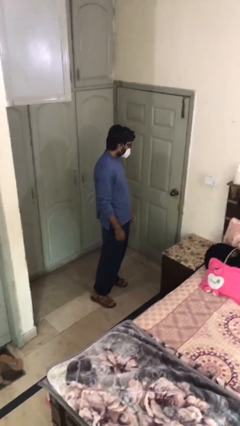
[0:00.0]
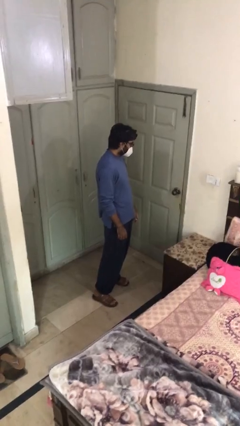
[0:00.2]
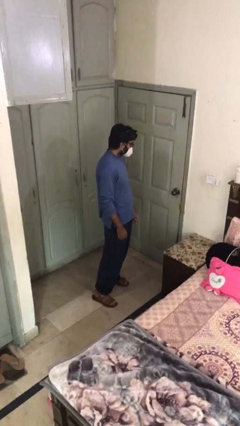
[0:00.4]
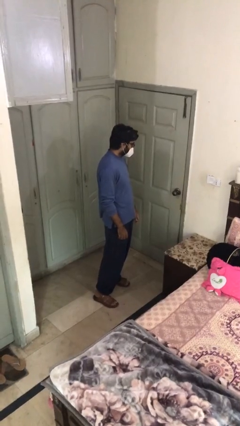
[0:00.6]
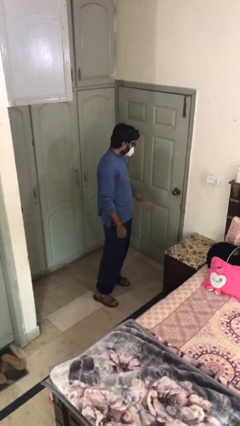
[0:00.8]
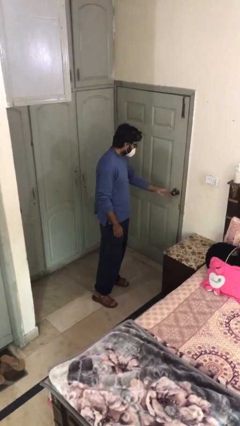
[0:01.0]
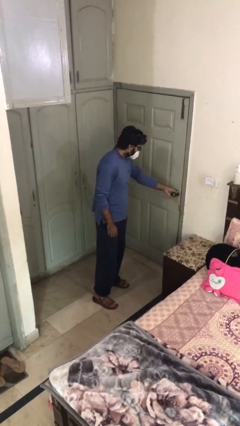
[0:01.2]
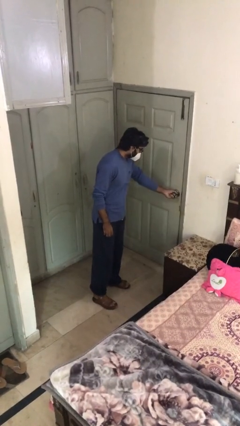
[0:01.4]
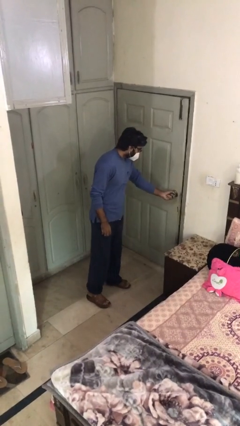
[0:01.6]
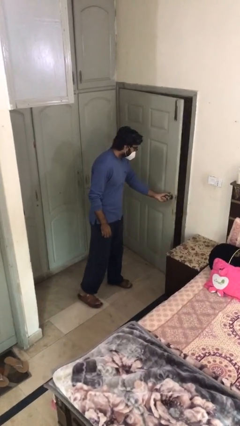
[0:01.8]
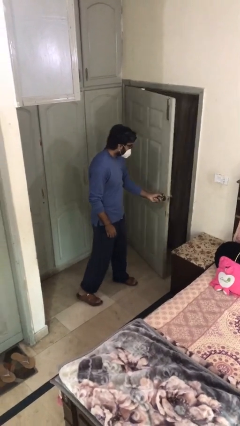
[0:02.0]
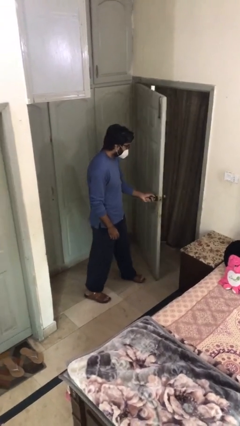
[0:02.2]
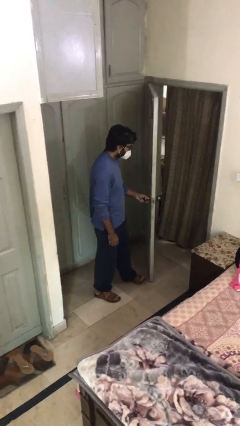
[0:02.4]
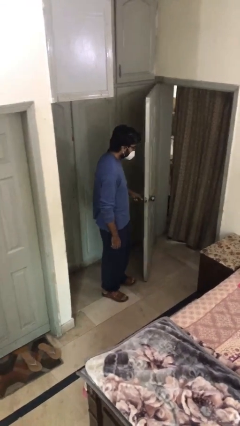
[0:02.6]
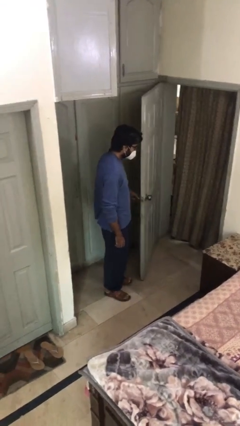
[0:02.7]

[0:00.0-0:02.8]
person opens facility door

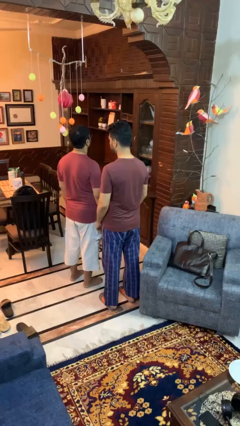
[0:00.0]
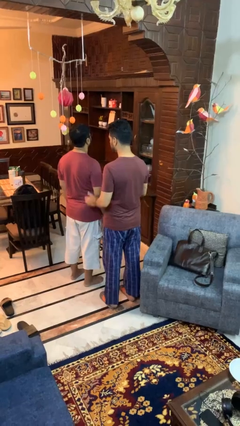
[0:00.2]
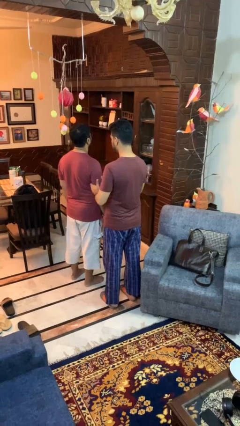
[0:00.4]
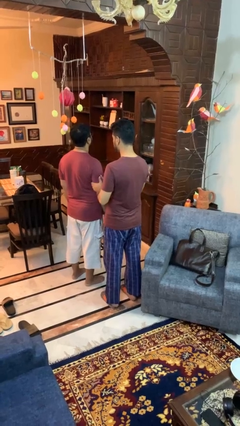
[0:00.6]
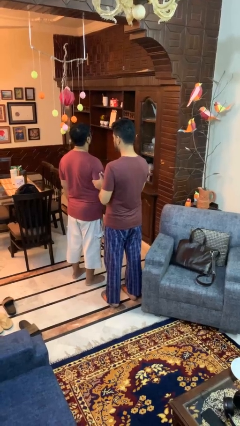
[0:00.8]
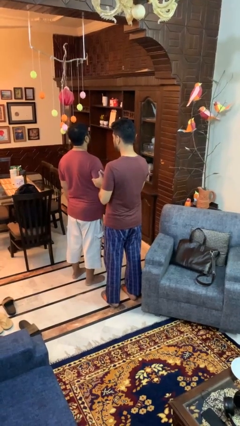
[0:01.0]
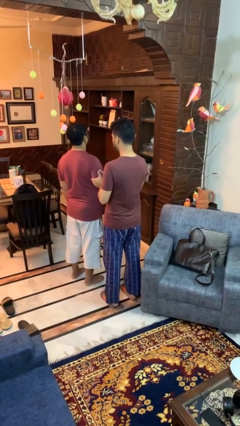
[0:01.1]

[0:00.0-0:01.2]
person grabs person by bicep

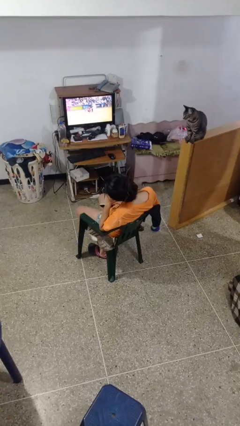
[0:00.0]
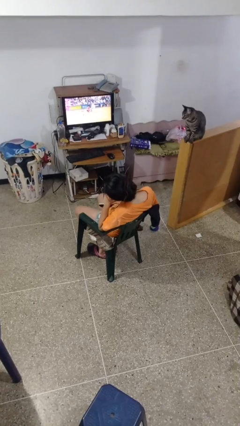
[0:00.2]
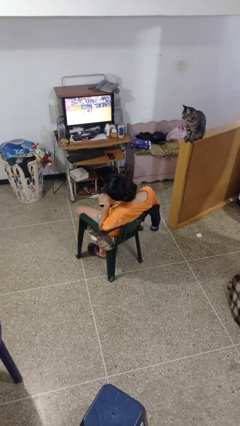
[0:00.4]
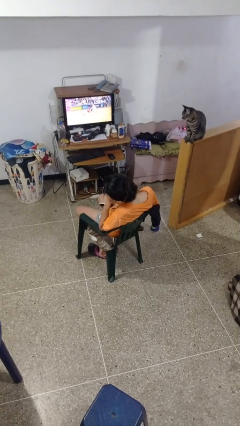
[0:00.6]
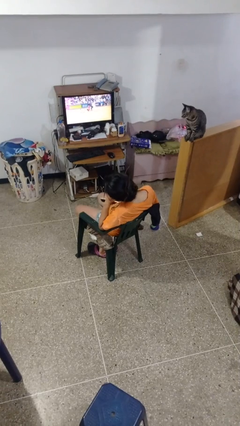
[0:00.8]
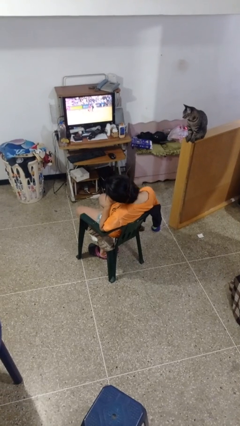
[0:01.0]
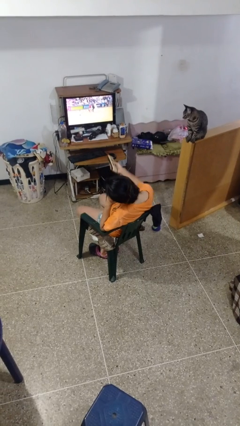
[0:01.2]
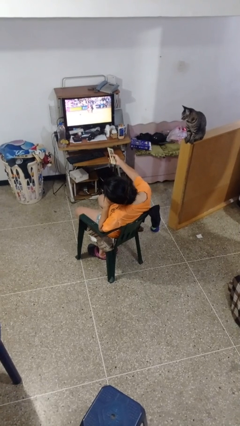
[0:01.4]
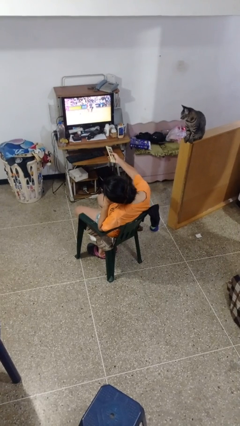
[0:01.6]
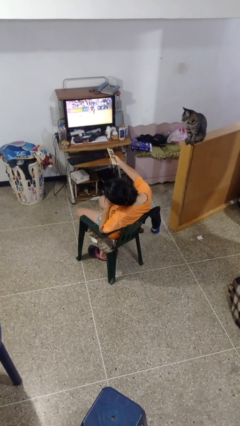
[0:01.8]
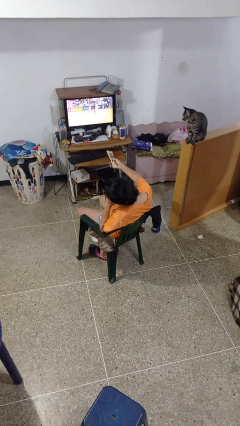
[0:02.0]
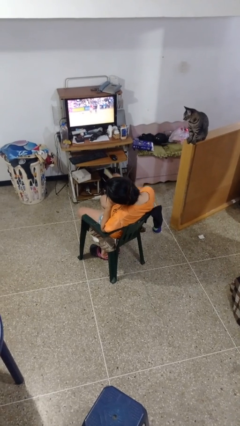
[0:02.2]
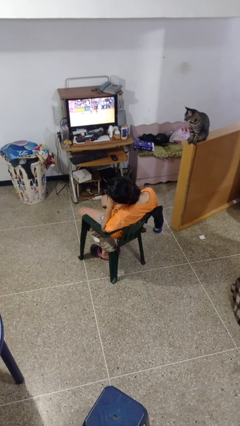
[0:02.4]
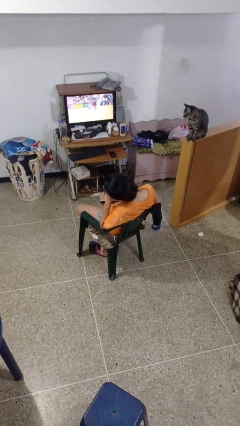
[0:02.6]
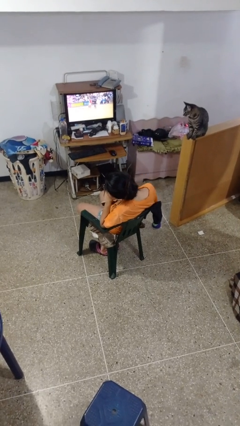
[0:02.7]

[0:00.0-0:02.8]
person uses television remote

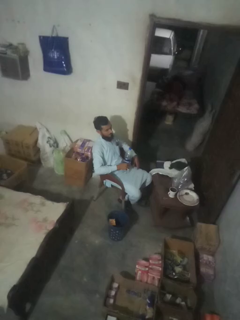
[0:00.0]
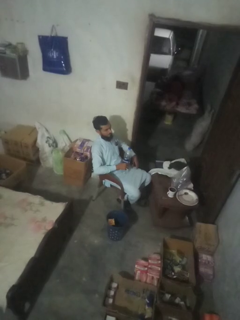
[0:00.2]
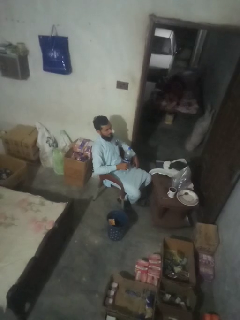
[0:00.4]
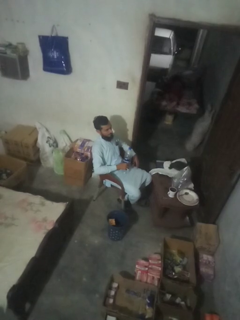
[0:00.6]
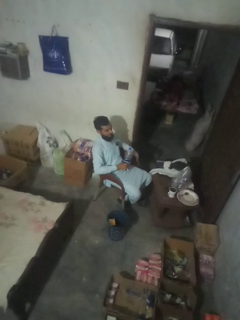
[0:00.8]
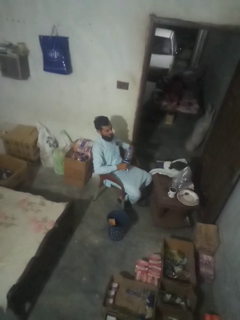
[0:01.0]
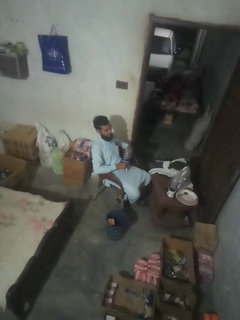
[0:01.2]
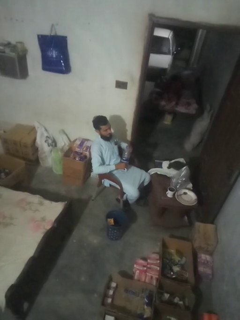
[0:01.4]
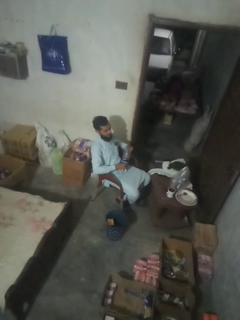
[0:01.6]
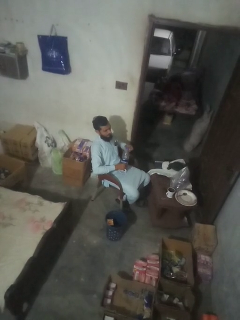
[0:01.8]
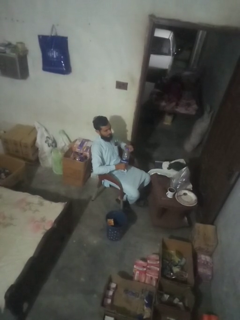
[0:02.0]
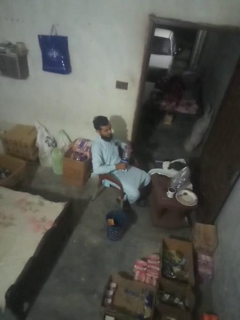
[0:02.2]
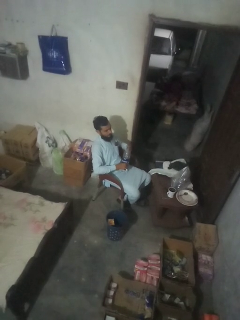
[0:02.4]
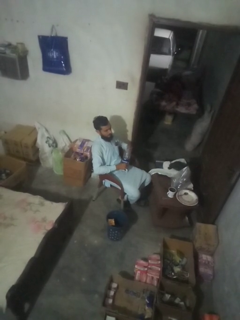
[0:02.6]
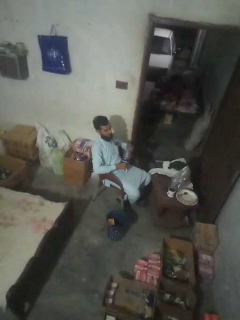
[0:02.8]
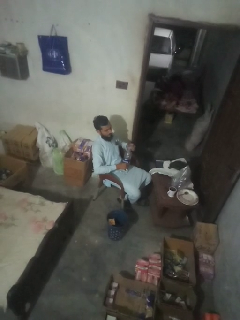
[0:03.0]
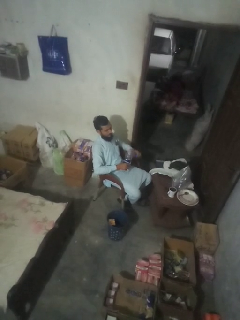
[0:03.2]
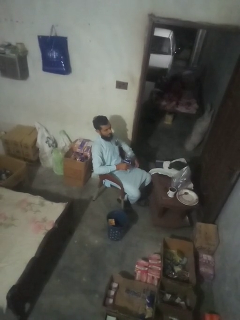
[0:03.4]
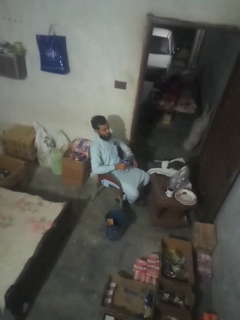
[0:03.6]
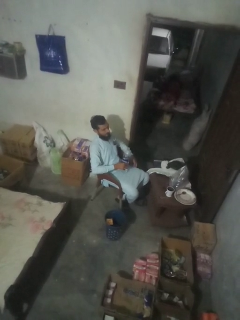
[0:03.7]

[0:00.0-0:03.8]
person unscrews lid from bottle

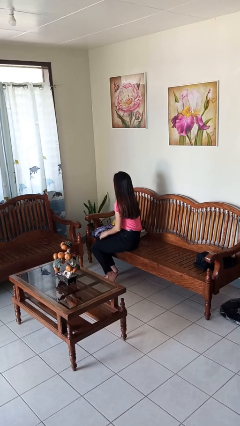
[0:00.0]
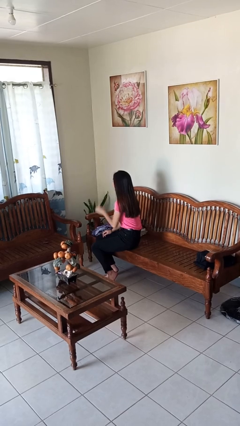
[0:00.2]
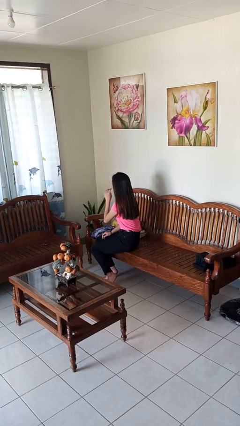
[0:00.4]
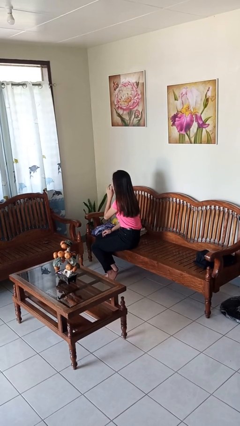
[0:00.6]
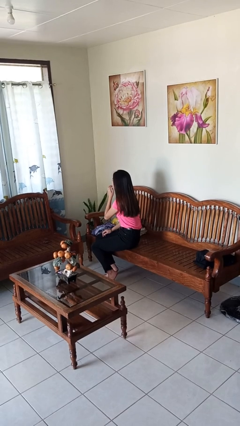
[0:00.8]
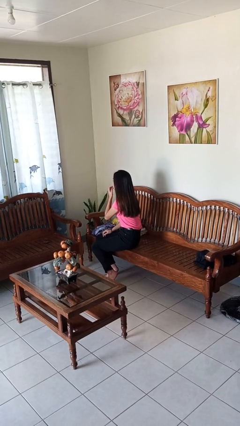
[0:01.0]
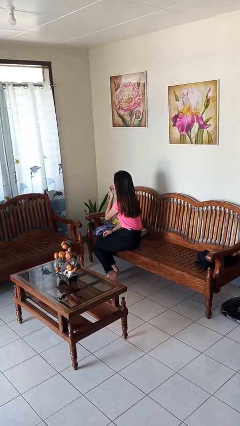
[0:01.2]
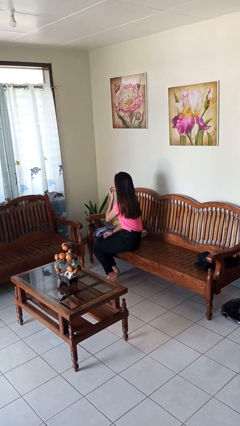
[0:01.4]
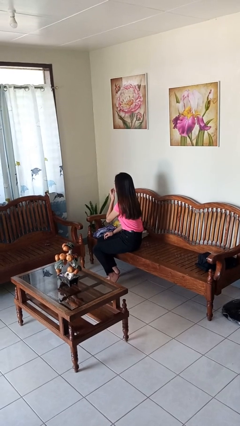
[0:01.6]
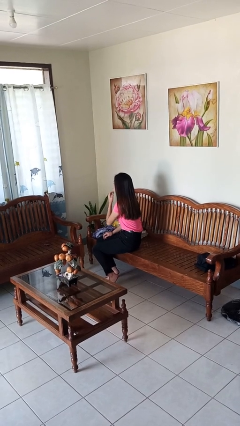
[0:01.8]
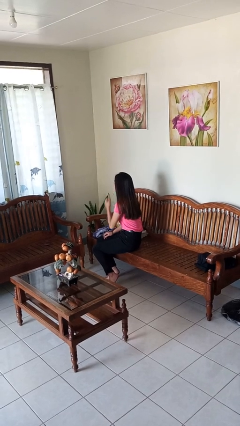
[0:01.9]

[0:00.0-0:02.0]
person licks fingers

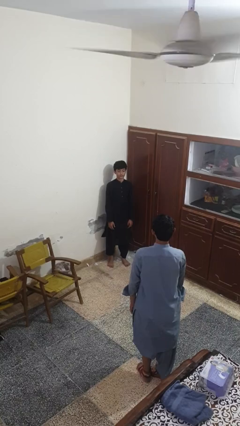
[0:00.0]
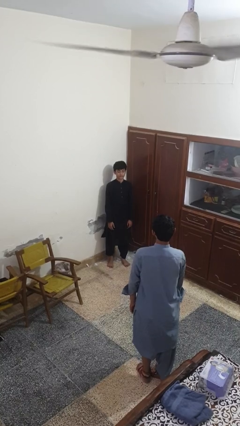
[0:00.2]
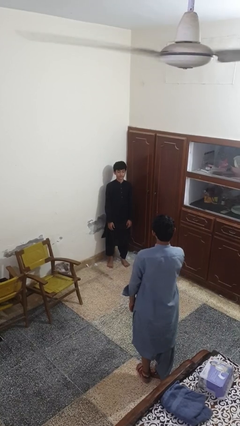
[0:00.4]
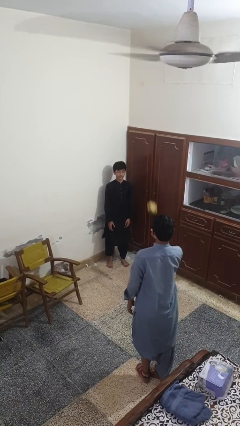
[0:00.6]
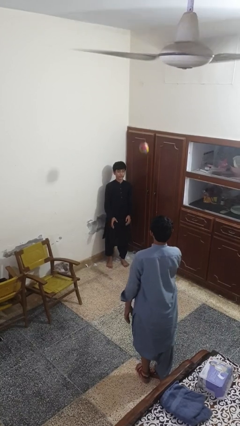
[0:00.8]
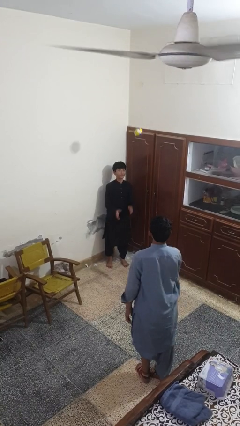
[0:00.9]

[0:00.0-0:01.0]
person catches object from person

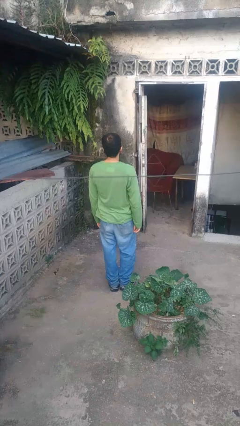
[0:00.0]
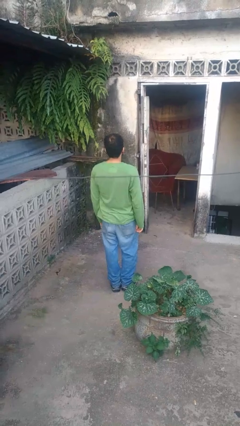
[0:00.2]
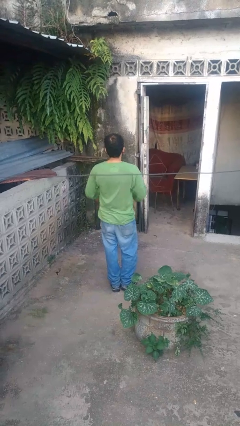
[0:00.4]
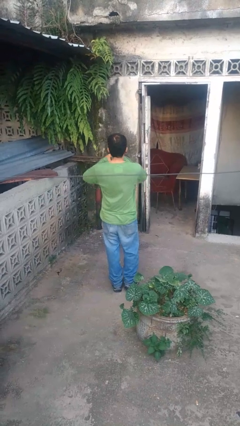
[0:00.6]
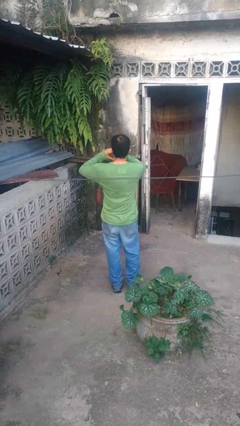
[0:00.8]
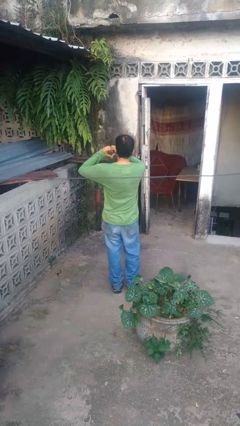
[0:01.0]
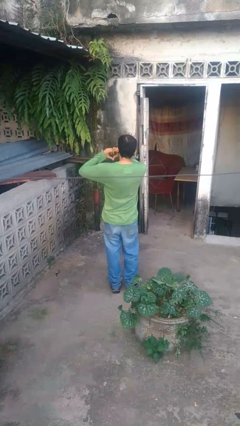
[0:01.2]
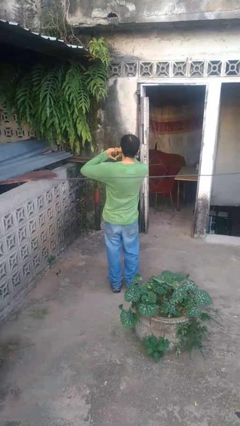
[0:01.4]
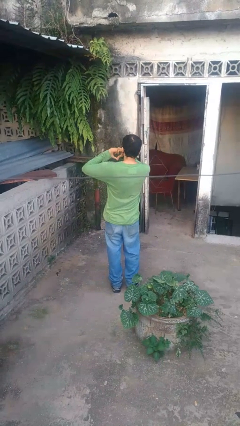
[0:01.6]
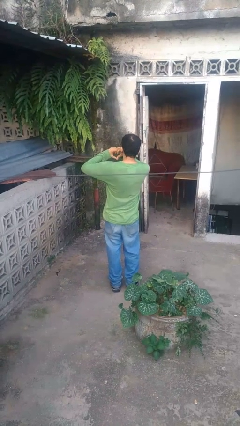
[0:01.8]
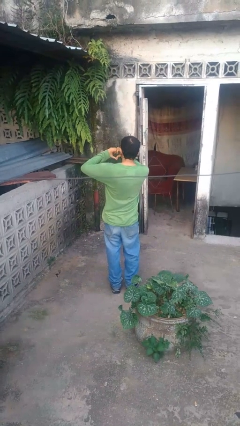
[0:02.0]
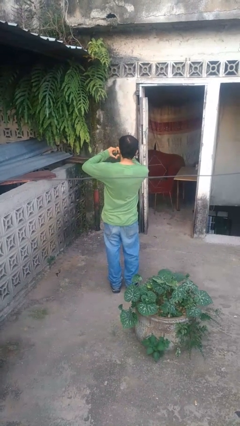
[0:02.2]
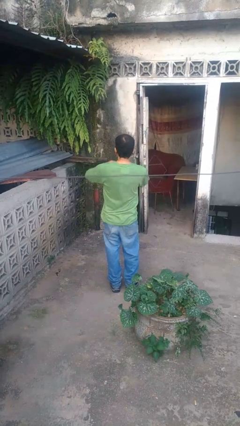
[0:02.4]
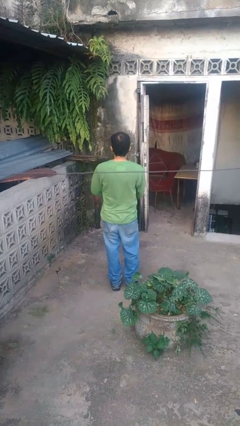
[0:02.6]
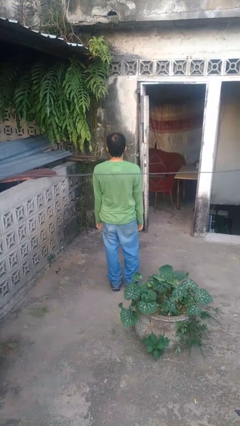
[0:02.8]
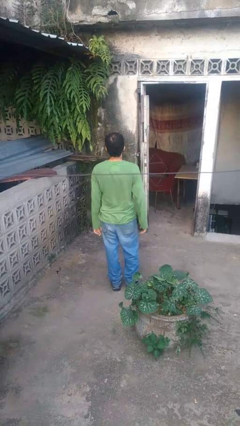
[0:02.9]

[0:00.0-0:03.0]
person gestures heart

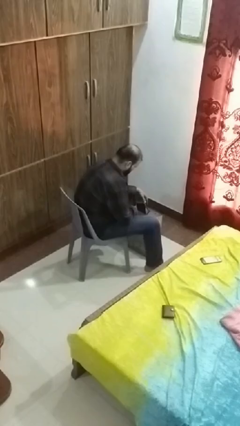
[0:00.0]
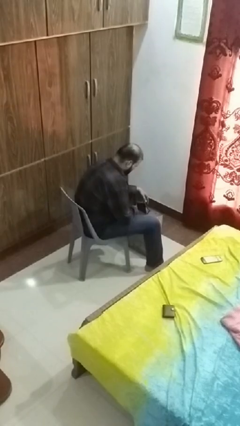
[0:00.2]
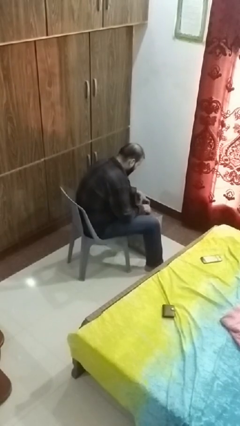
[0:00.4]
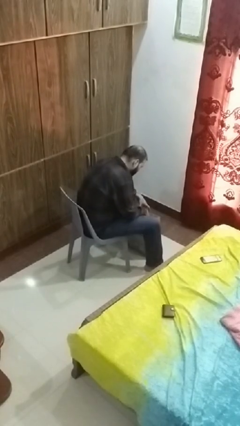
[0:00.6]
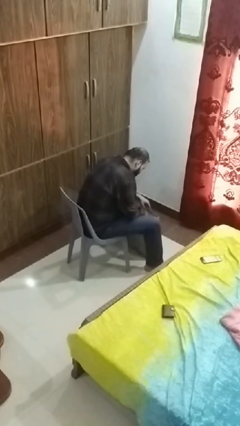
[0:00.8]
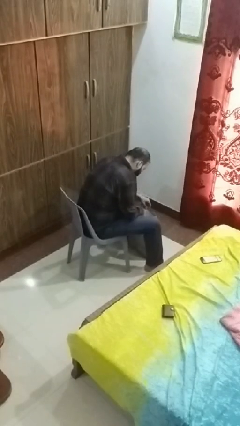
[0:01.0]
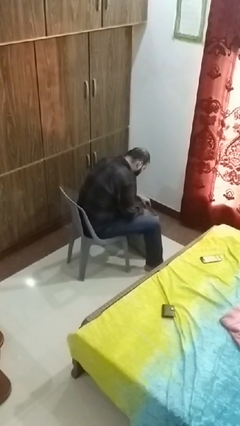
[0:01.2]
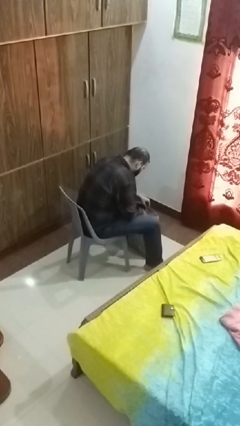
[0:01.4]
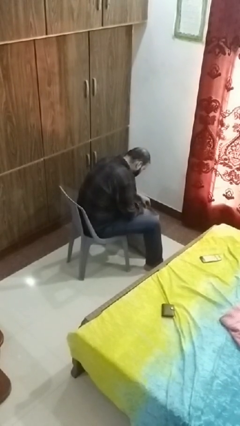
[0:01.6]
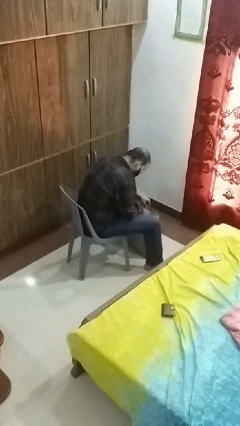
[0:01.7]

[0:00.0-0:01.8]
person searches in bag
